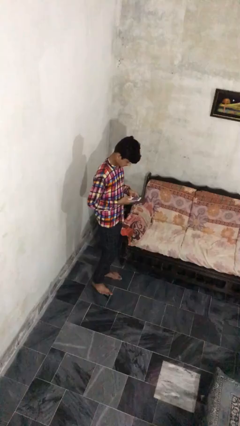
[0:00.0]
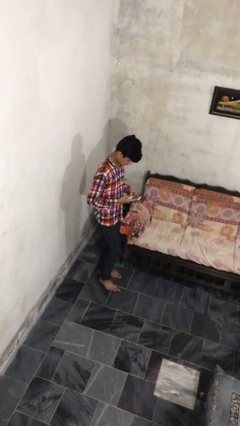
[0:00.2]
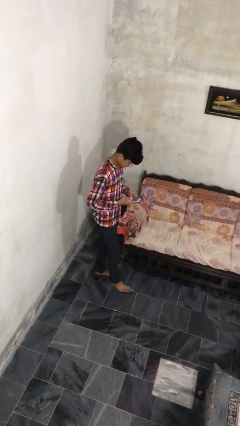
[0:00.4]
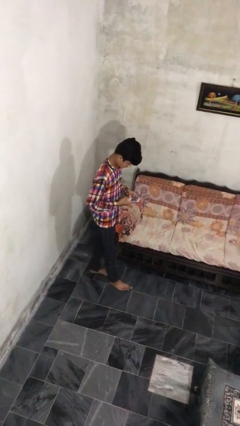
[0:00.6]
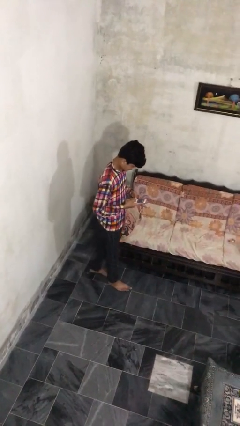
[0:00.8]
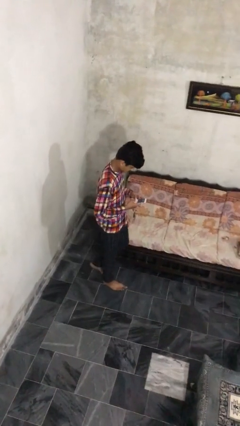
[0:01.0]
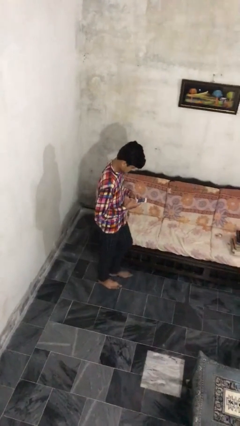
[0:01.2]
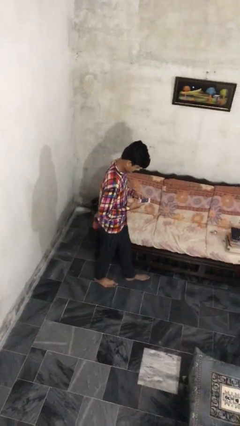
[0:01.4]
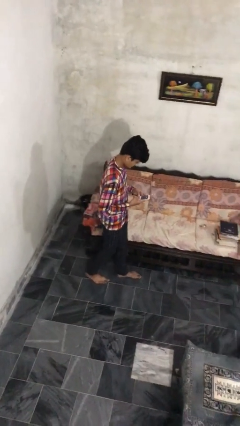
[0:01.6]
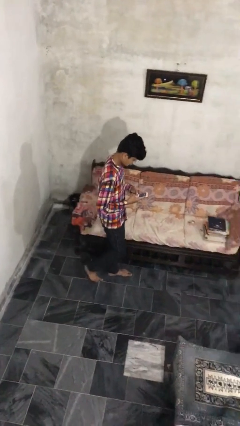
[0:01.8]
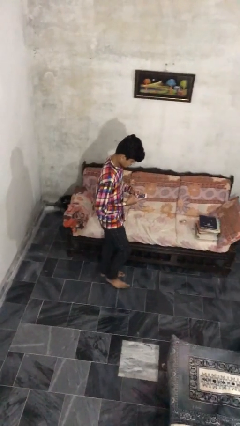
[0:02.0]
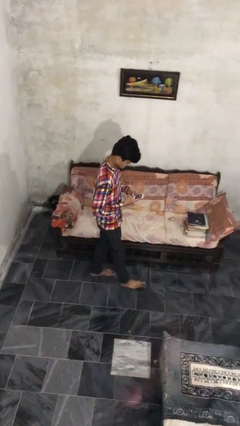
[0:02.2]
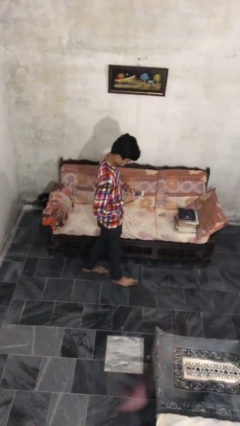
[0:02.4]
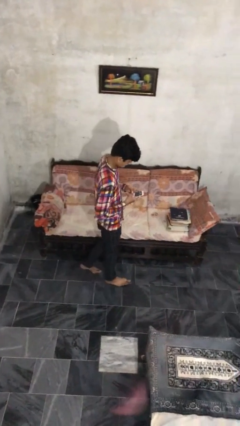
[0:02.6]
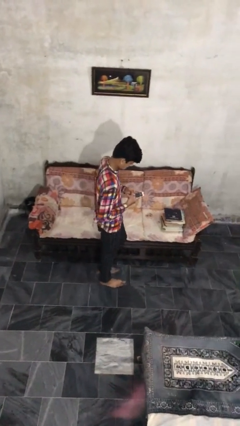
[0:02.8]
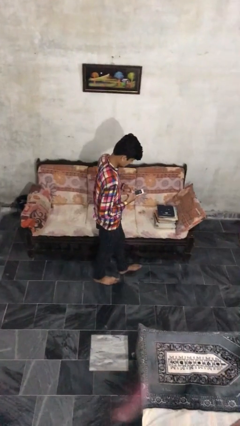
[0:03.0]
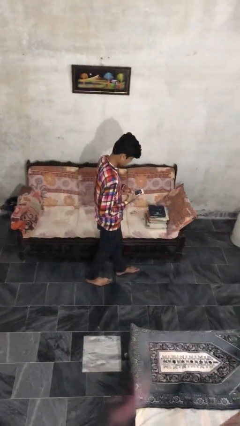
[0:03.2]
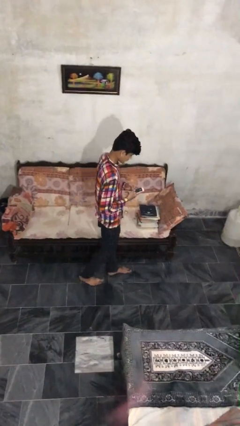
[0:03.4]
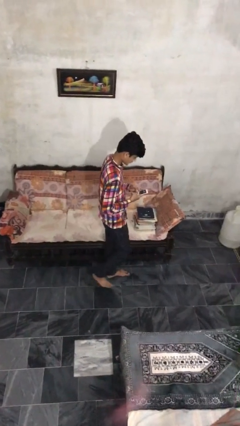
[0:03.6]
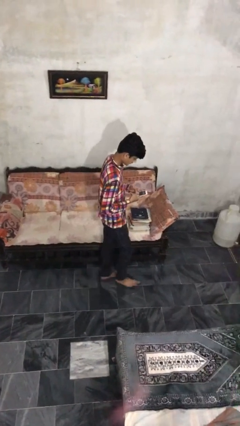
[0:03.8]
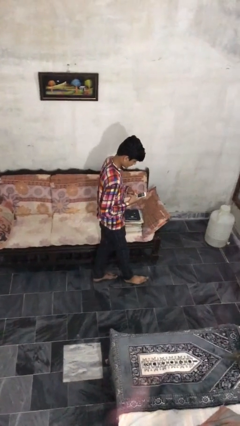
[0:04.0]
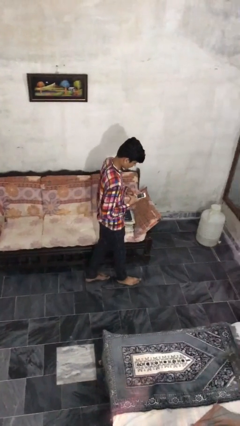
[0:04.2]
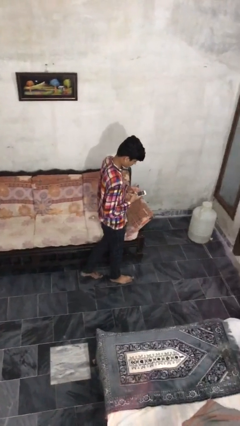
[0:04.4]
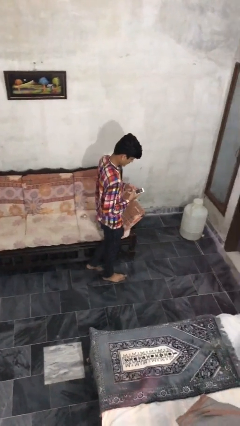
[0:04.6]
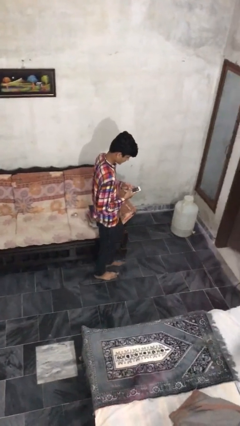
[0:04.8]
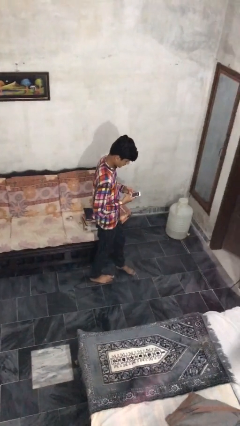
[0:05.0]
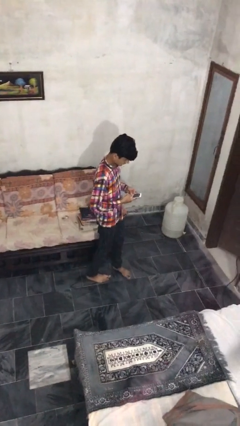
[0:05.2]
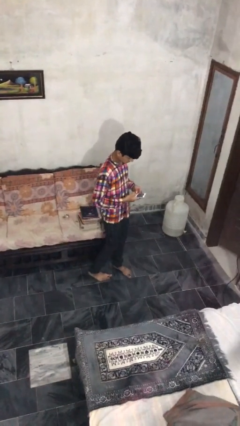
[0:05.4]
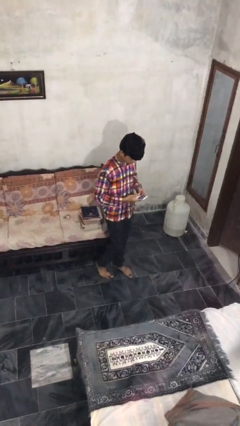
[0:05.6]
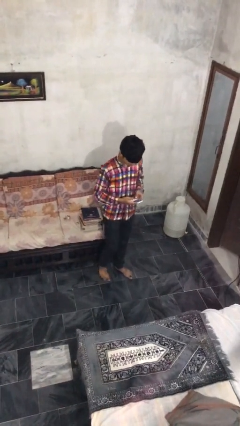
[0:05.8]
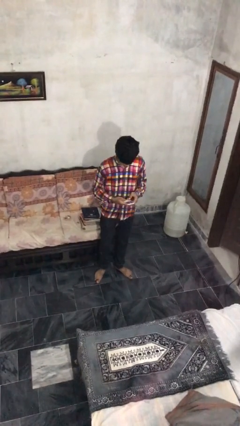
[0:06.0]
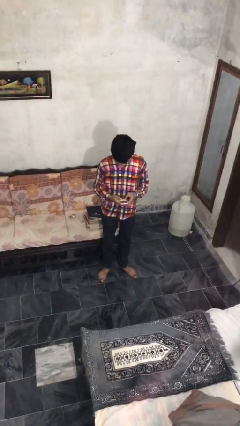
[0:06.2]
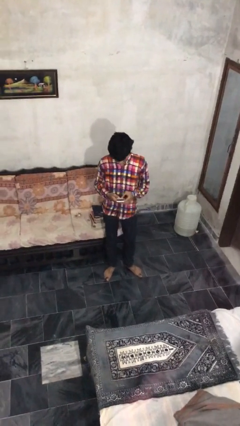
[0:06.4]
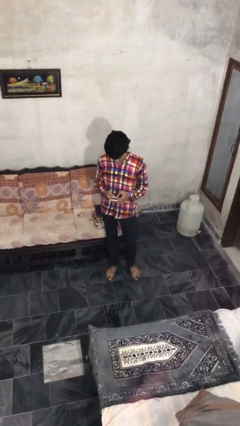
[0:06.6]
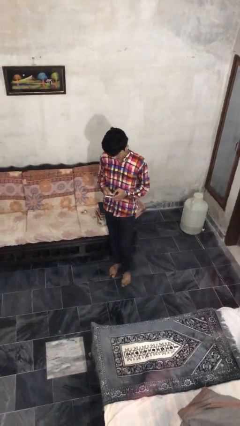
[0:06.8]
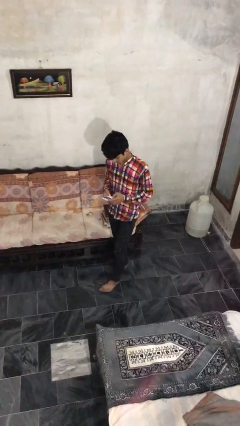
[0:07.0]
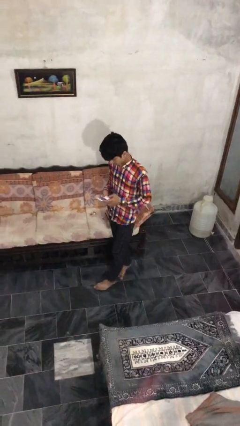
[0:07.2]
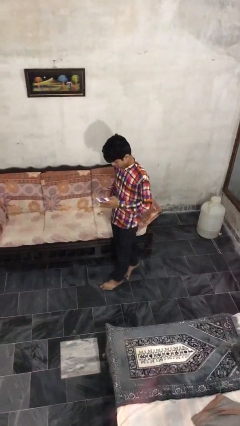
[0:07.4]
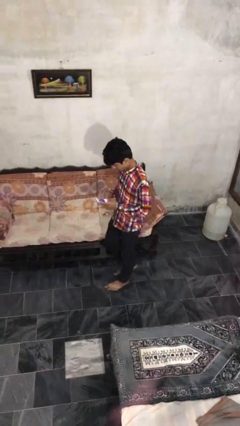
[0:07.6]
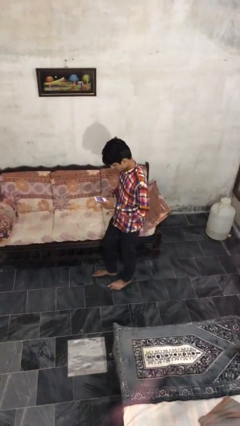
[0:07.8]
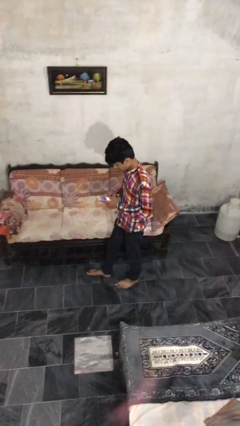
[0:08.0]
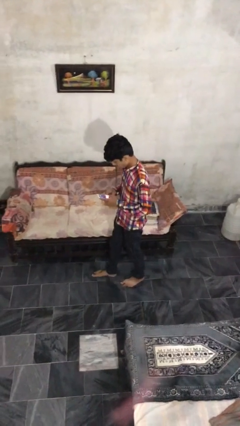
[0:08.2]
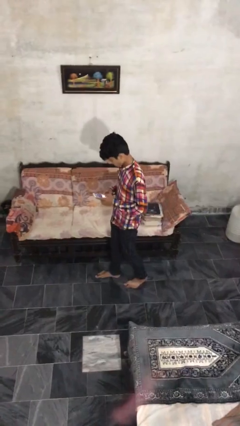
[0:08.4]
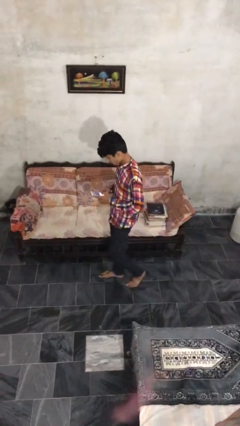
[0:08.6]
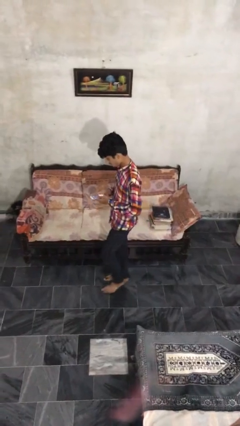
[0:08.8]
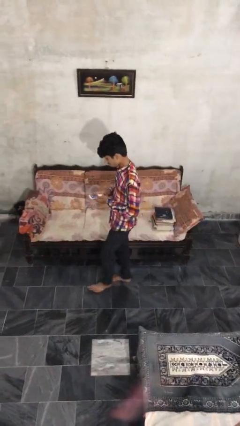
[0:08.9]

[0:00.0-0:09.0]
person texts on phone

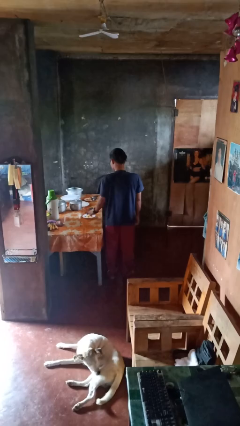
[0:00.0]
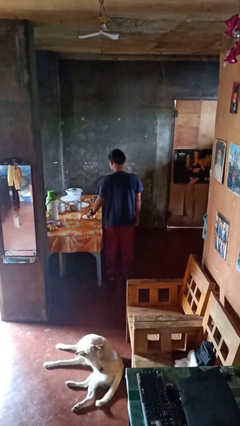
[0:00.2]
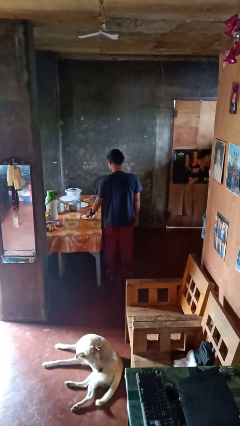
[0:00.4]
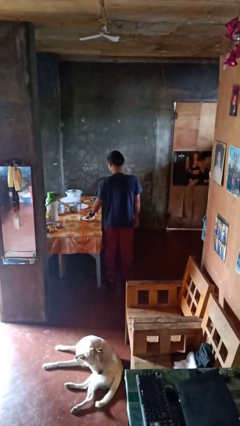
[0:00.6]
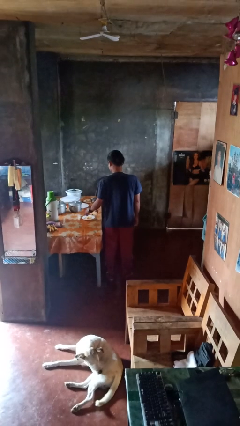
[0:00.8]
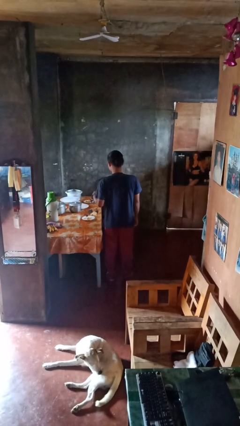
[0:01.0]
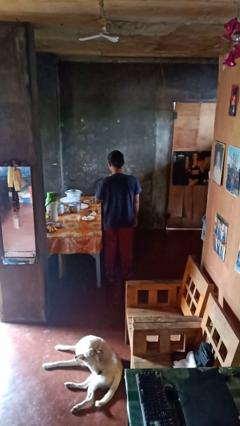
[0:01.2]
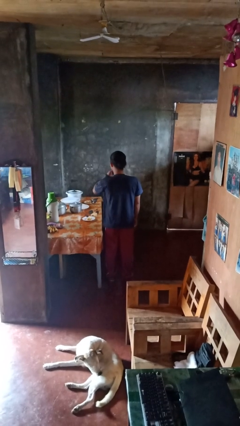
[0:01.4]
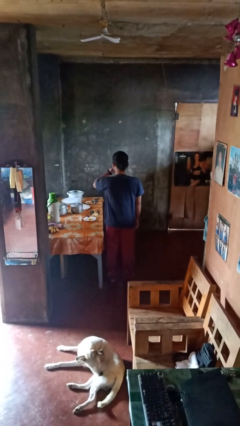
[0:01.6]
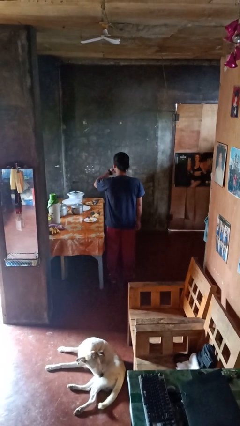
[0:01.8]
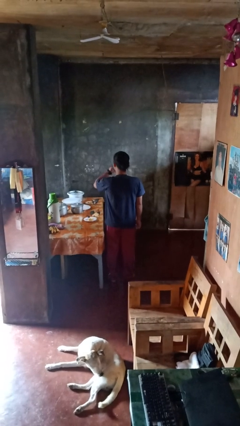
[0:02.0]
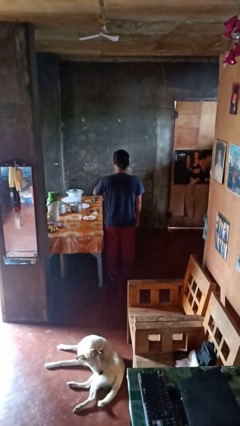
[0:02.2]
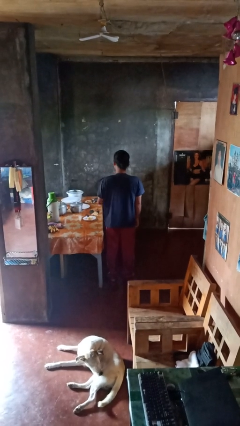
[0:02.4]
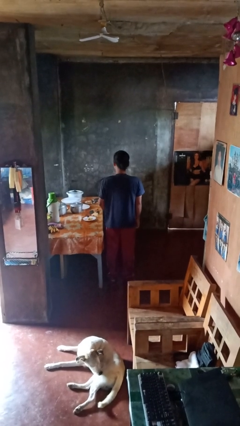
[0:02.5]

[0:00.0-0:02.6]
person eats with hands

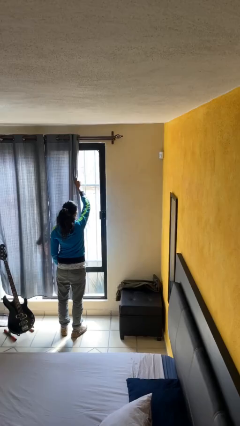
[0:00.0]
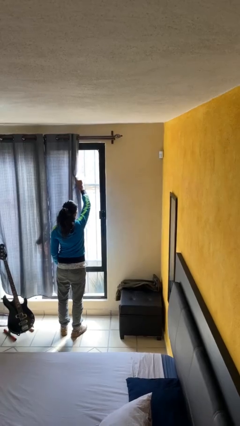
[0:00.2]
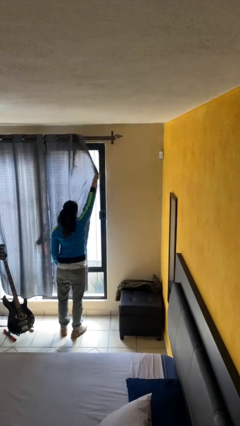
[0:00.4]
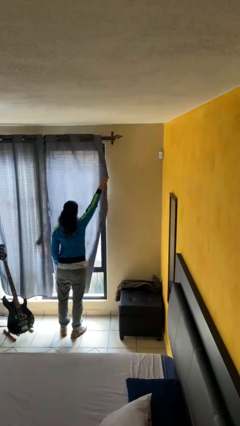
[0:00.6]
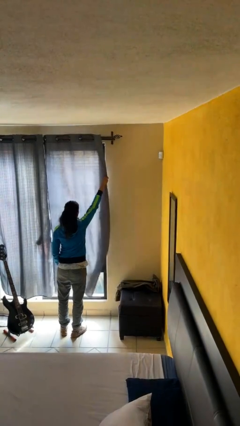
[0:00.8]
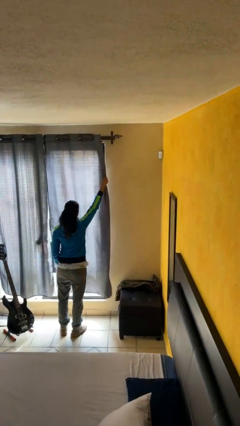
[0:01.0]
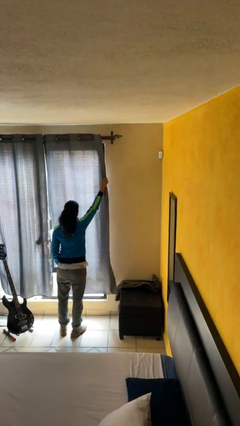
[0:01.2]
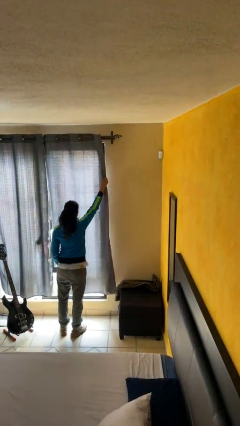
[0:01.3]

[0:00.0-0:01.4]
person closes curtains

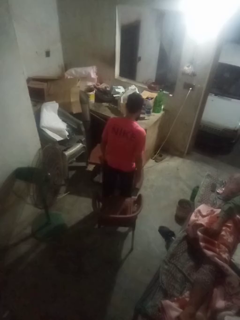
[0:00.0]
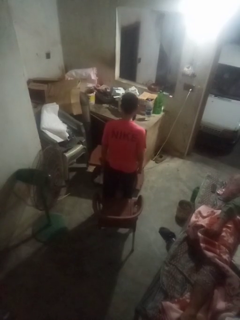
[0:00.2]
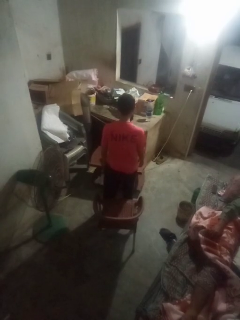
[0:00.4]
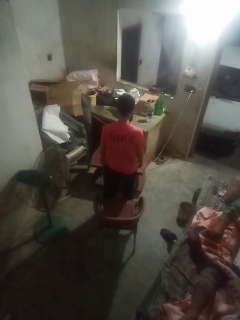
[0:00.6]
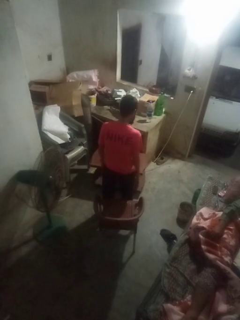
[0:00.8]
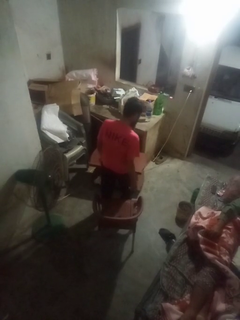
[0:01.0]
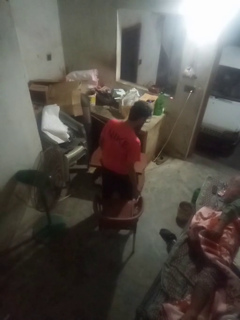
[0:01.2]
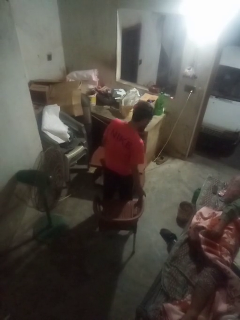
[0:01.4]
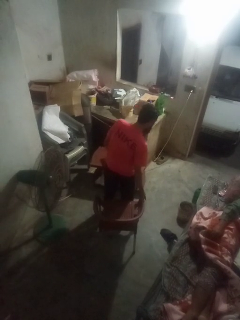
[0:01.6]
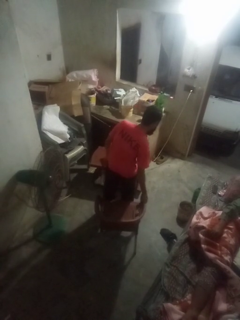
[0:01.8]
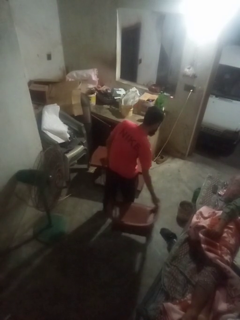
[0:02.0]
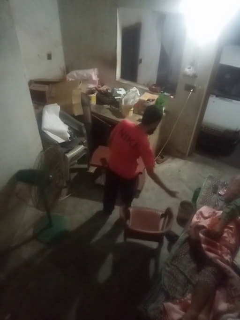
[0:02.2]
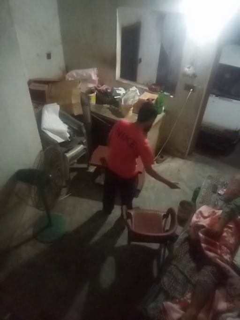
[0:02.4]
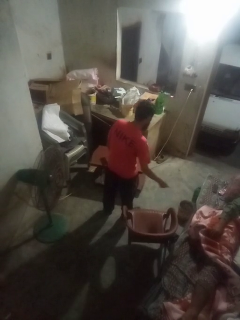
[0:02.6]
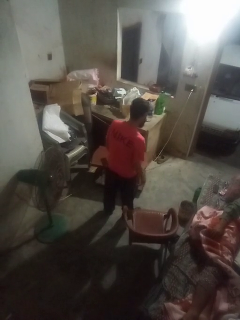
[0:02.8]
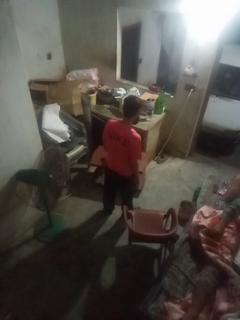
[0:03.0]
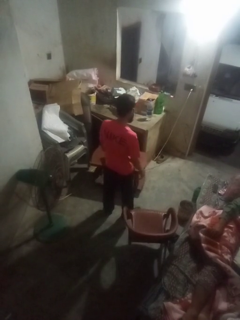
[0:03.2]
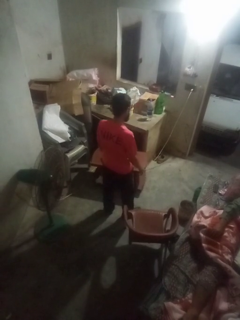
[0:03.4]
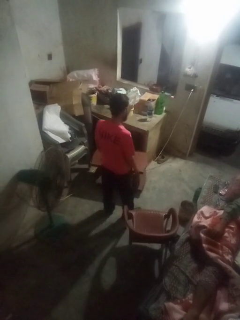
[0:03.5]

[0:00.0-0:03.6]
person pushes in chair

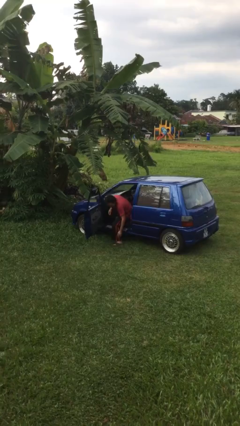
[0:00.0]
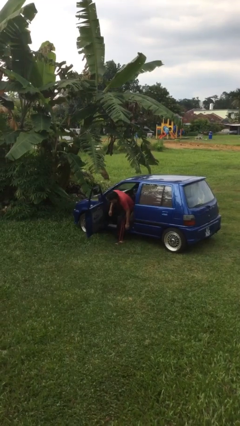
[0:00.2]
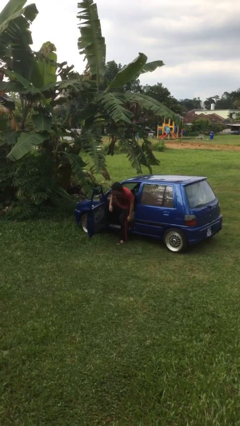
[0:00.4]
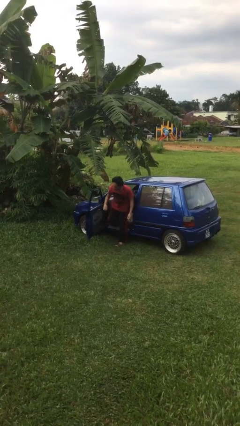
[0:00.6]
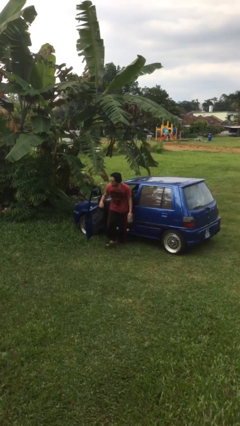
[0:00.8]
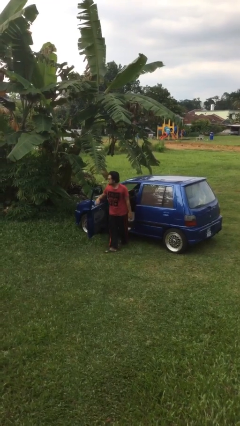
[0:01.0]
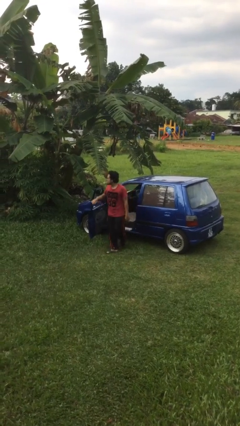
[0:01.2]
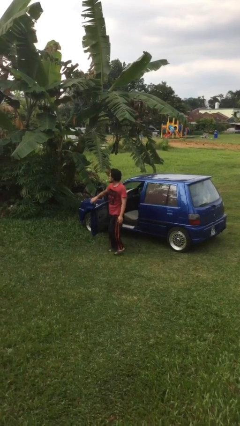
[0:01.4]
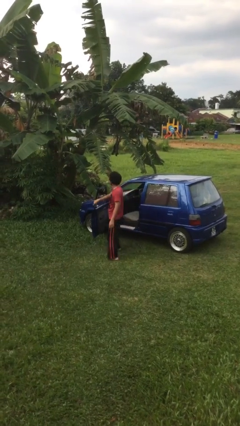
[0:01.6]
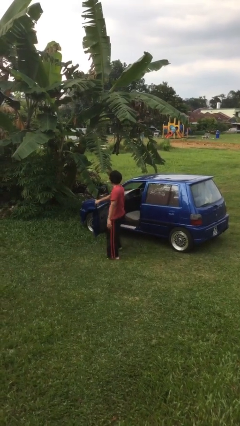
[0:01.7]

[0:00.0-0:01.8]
person exits car
